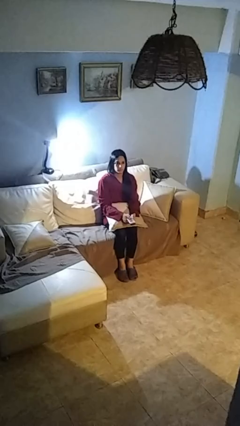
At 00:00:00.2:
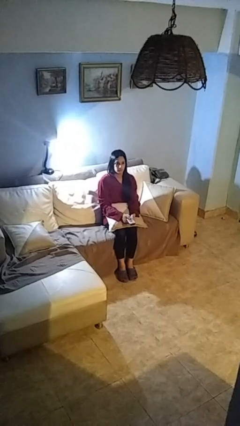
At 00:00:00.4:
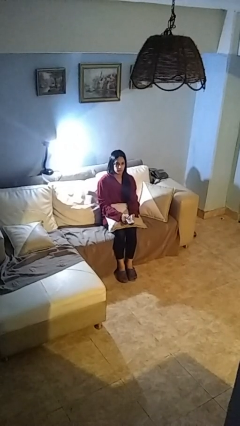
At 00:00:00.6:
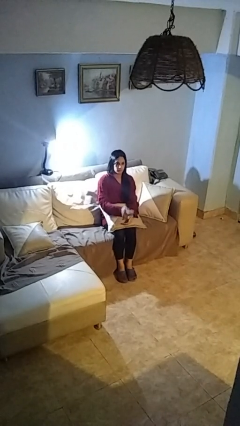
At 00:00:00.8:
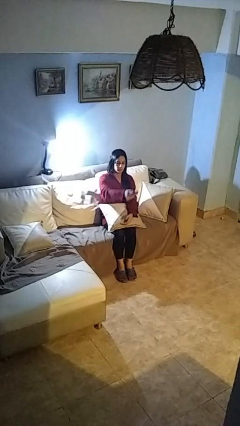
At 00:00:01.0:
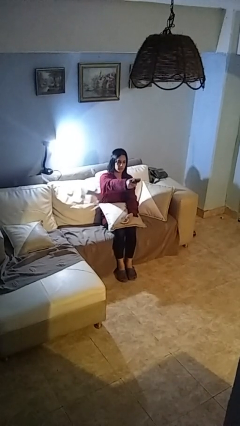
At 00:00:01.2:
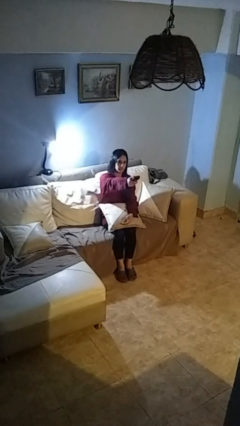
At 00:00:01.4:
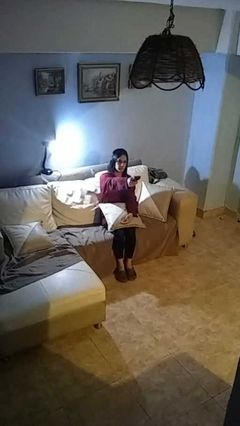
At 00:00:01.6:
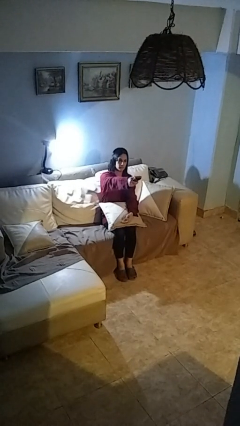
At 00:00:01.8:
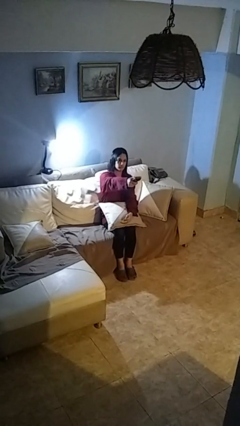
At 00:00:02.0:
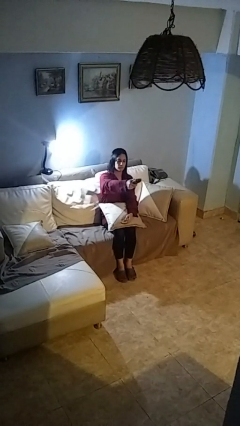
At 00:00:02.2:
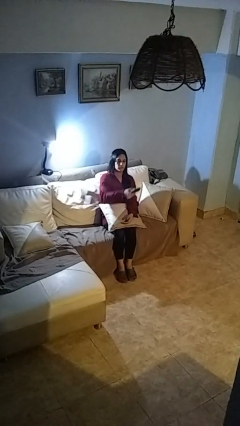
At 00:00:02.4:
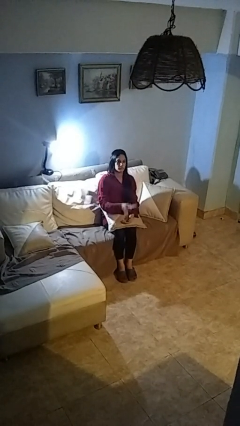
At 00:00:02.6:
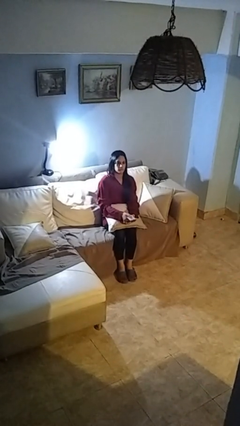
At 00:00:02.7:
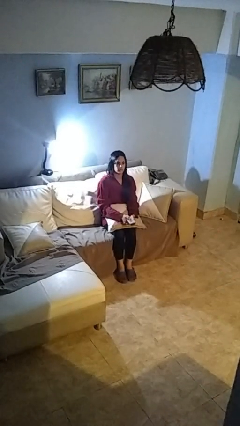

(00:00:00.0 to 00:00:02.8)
person uses television remote

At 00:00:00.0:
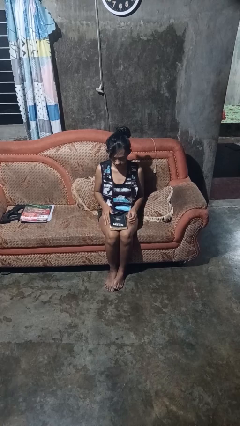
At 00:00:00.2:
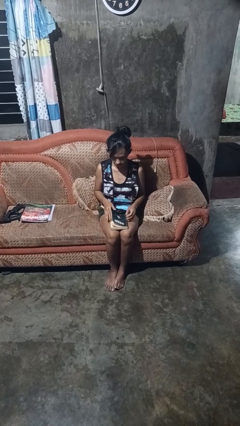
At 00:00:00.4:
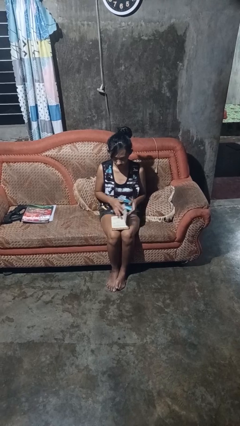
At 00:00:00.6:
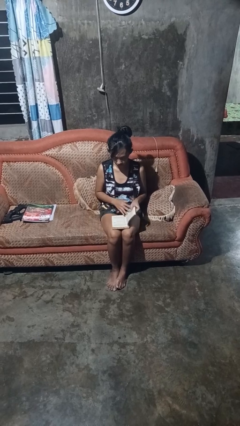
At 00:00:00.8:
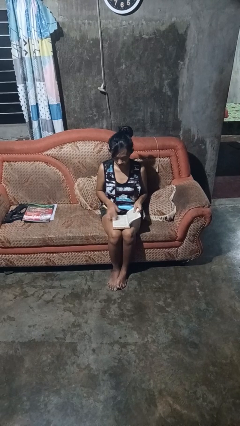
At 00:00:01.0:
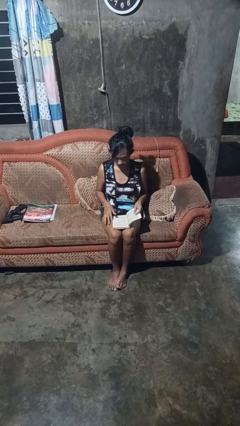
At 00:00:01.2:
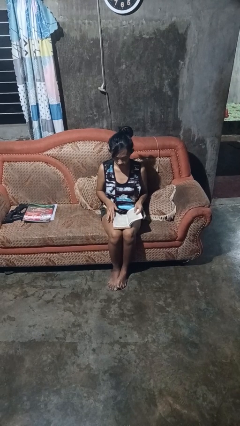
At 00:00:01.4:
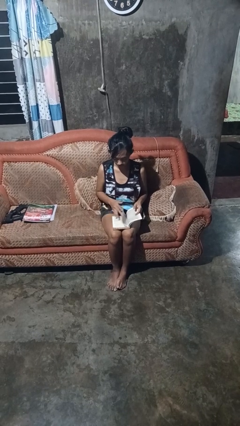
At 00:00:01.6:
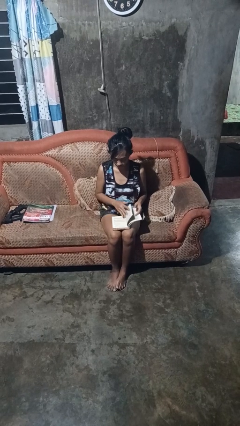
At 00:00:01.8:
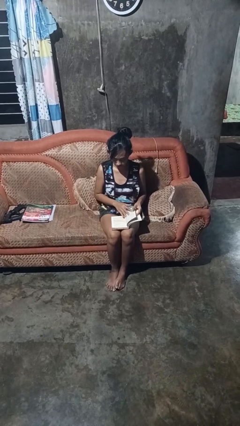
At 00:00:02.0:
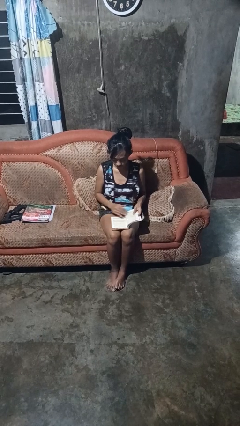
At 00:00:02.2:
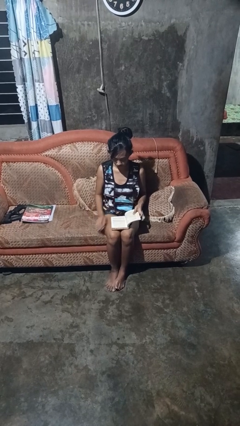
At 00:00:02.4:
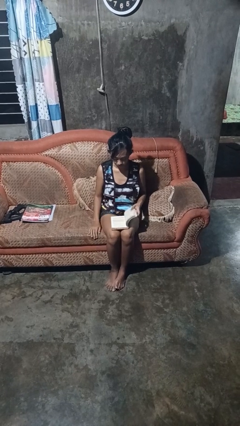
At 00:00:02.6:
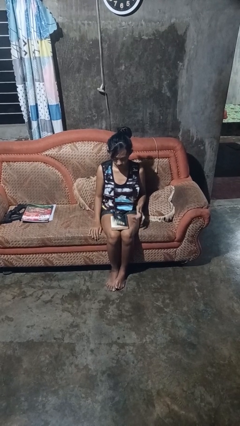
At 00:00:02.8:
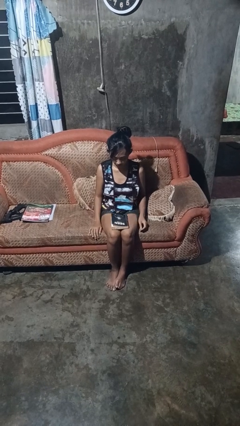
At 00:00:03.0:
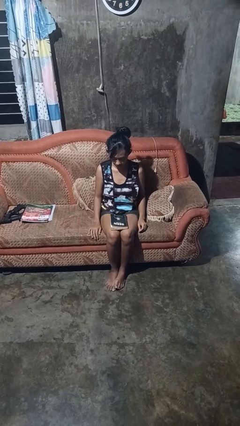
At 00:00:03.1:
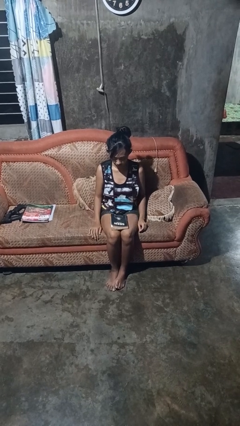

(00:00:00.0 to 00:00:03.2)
person reads book

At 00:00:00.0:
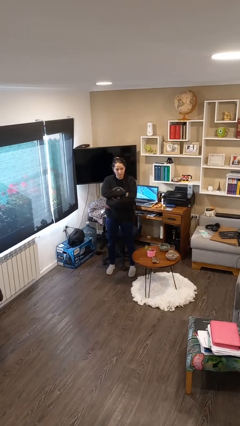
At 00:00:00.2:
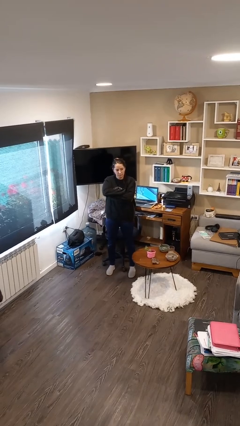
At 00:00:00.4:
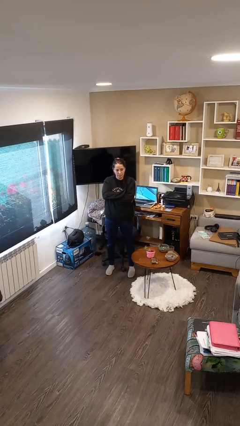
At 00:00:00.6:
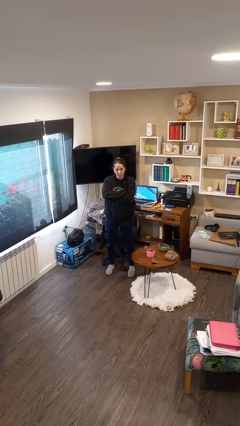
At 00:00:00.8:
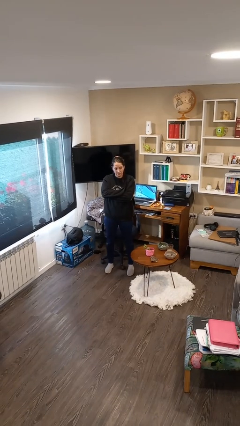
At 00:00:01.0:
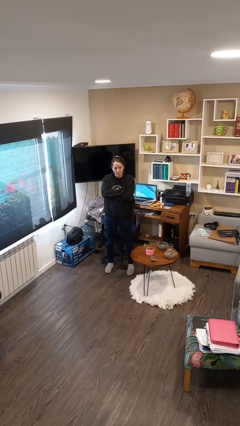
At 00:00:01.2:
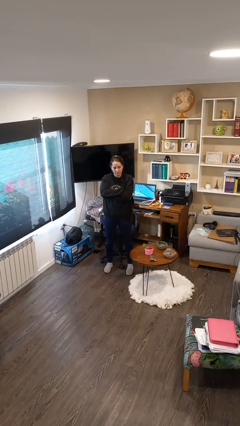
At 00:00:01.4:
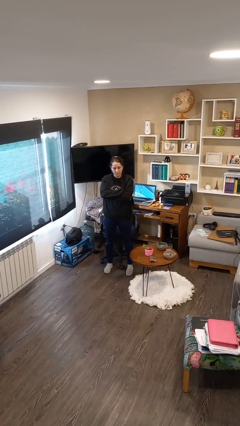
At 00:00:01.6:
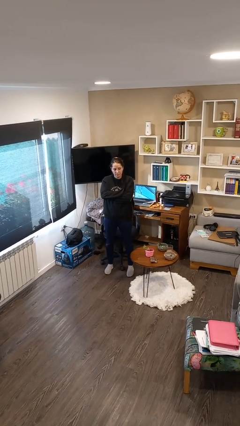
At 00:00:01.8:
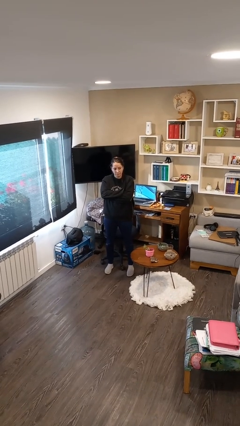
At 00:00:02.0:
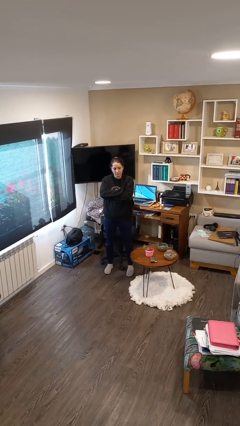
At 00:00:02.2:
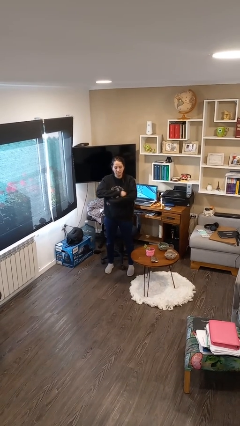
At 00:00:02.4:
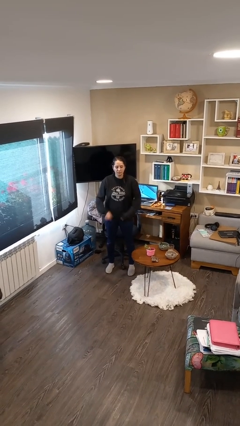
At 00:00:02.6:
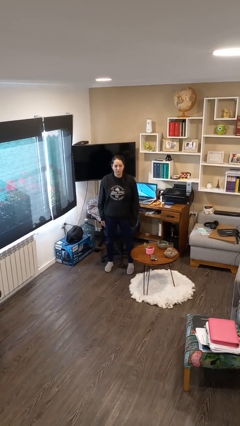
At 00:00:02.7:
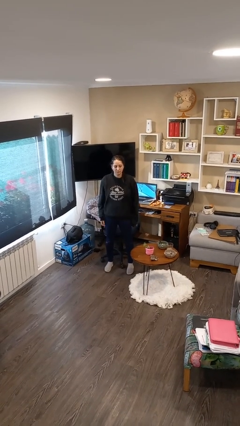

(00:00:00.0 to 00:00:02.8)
person crosses arms

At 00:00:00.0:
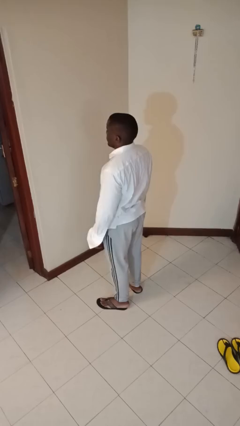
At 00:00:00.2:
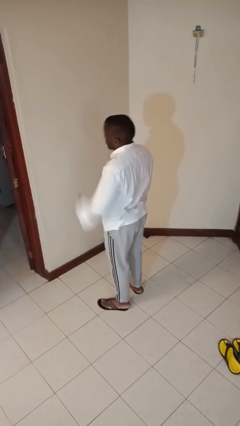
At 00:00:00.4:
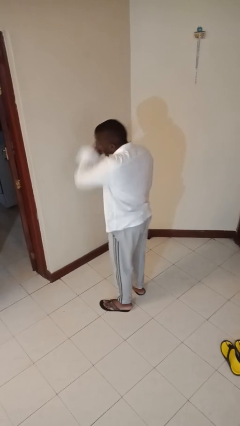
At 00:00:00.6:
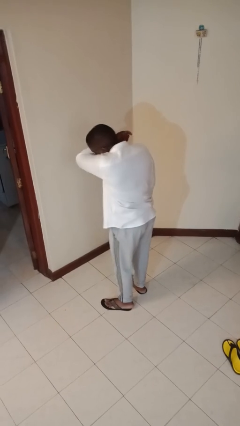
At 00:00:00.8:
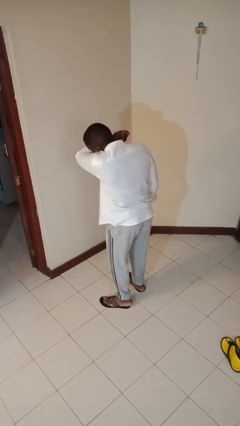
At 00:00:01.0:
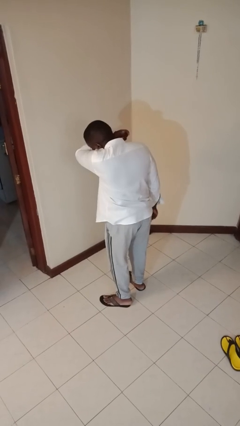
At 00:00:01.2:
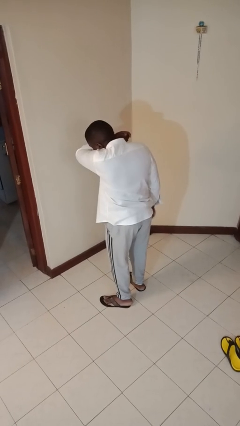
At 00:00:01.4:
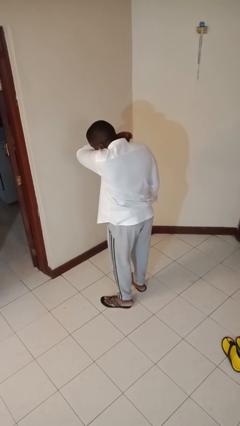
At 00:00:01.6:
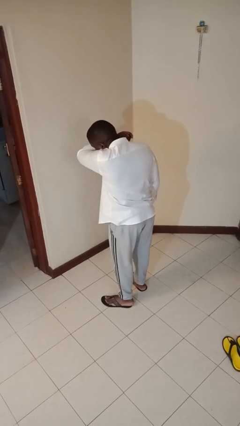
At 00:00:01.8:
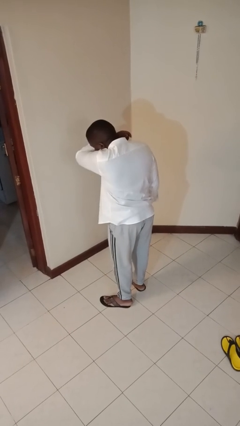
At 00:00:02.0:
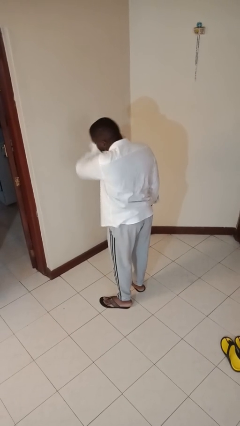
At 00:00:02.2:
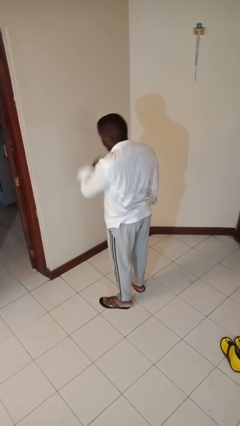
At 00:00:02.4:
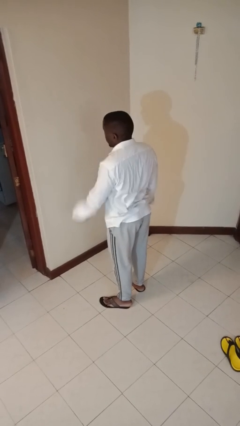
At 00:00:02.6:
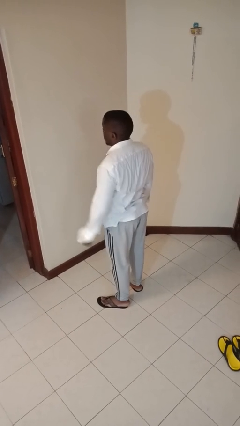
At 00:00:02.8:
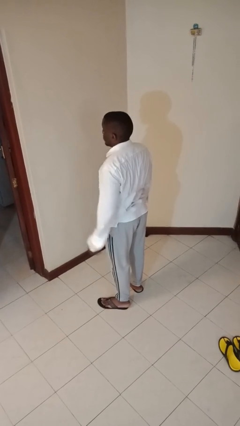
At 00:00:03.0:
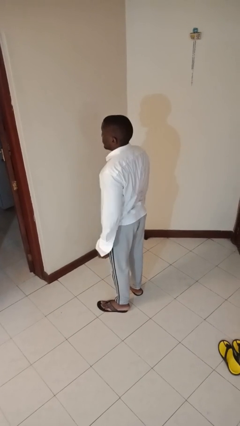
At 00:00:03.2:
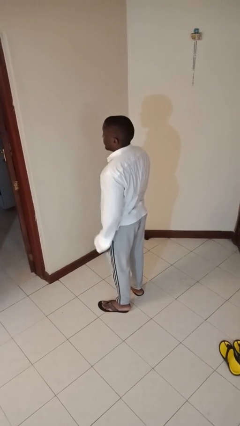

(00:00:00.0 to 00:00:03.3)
person sneezes into arm

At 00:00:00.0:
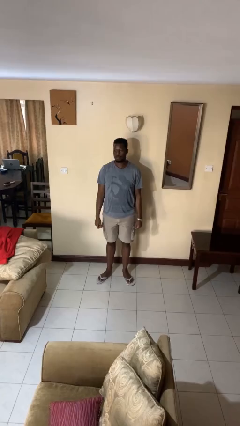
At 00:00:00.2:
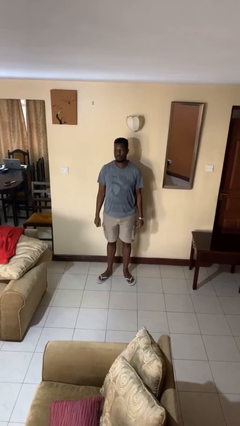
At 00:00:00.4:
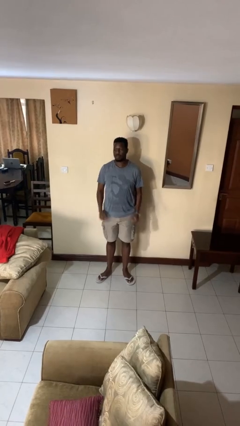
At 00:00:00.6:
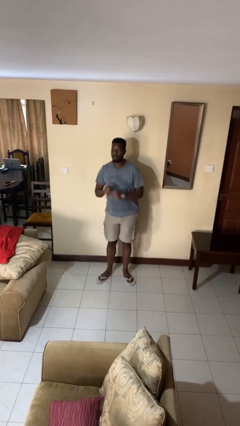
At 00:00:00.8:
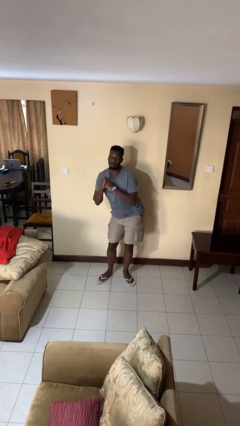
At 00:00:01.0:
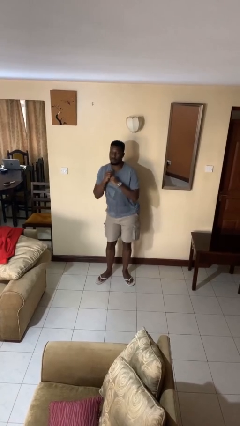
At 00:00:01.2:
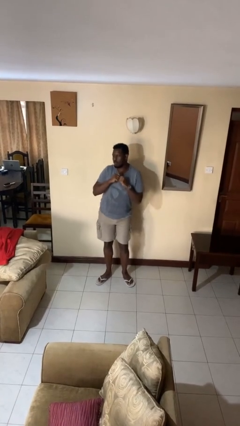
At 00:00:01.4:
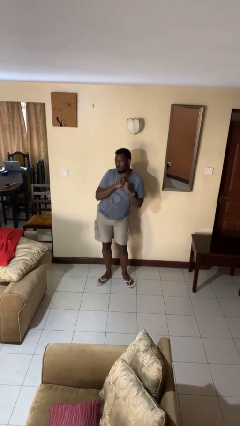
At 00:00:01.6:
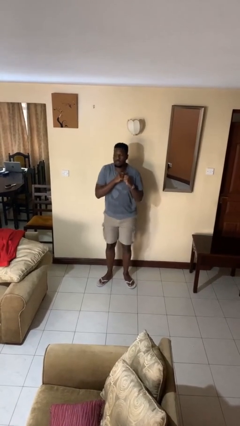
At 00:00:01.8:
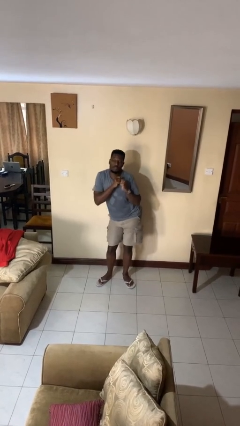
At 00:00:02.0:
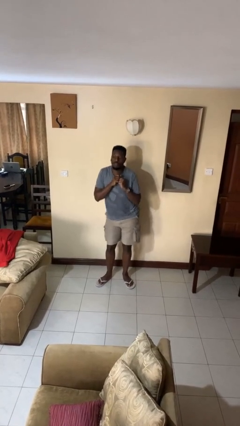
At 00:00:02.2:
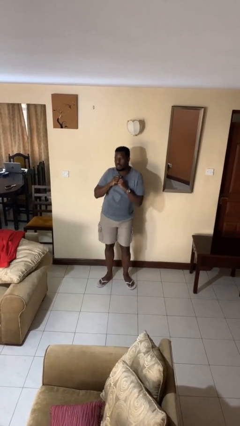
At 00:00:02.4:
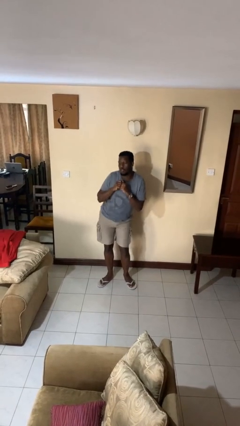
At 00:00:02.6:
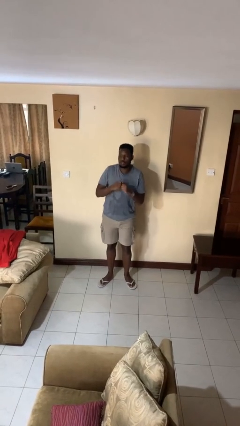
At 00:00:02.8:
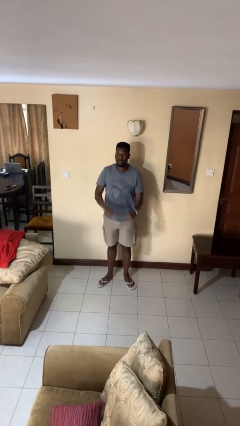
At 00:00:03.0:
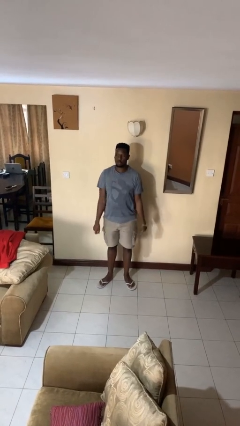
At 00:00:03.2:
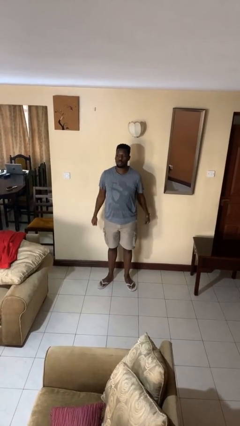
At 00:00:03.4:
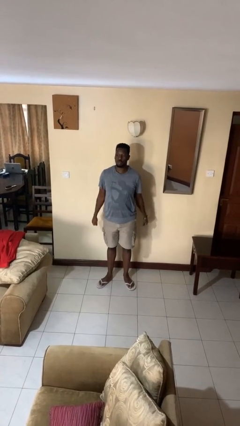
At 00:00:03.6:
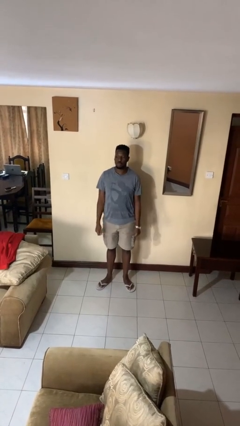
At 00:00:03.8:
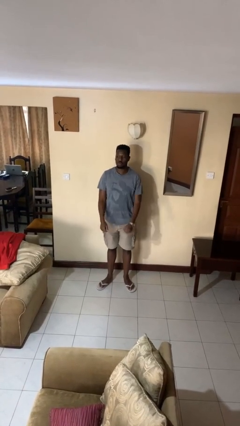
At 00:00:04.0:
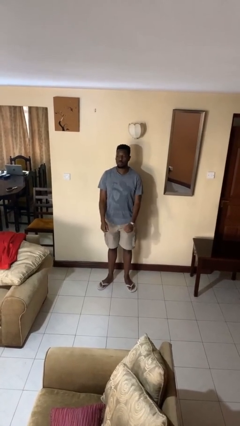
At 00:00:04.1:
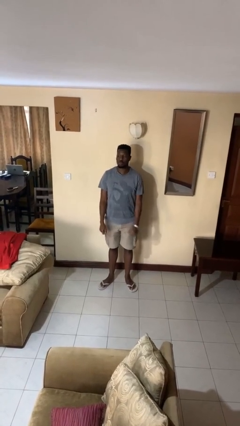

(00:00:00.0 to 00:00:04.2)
person wiggles hips

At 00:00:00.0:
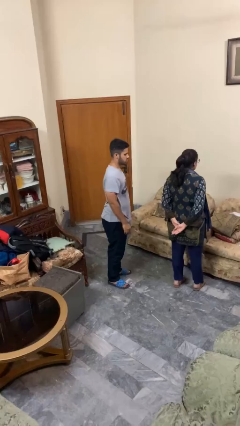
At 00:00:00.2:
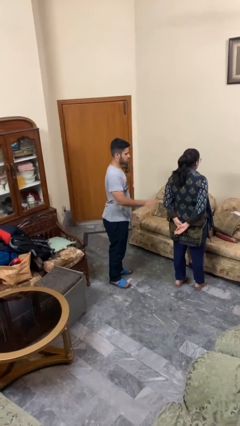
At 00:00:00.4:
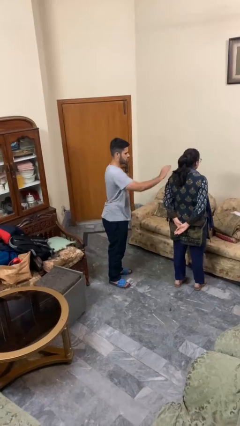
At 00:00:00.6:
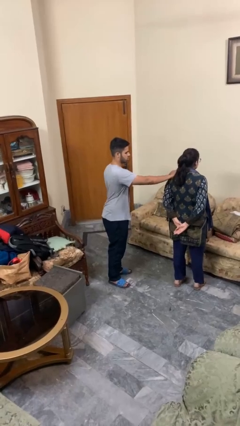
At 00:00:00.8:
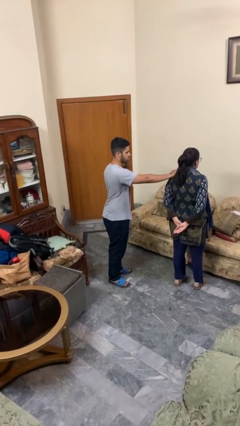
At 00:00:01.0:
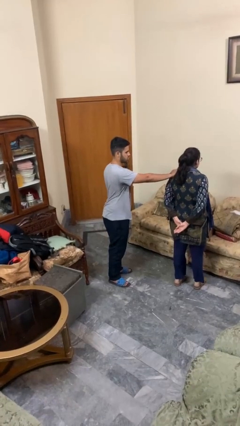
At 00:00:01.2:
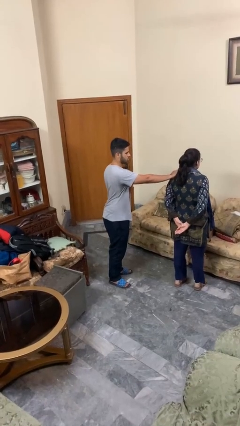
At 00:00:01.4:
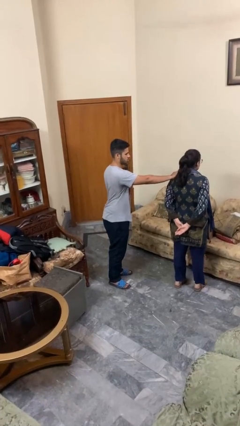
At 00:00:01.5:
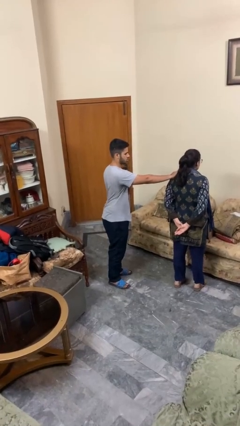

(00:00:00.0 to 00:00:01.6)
person grabs person by shoulder
